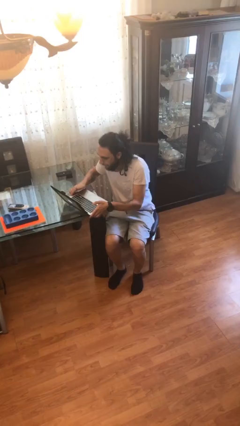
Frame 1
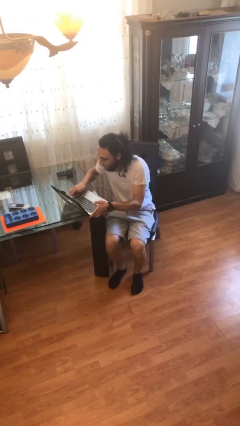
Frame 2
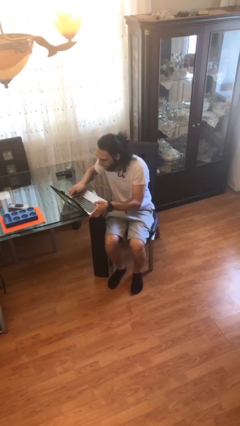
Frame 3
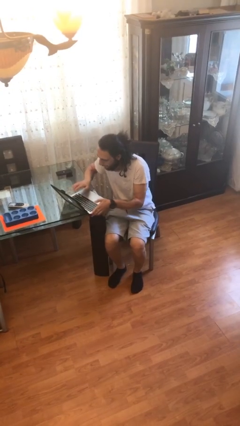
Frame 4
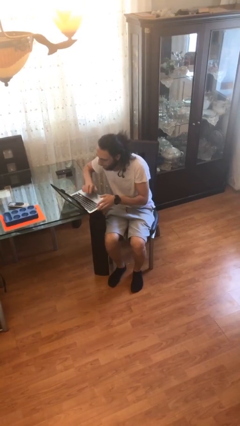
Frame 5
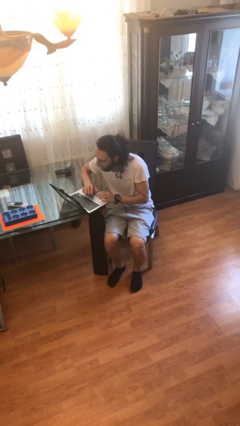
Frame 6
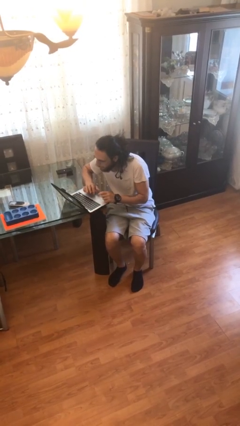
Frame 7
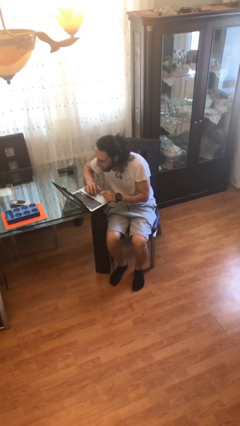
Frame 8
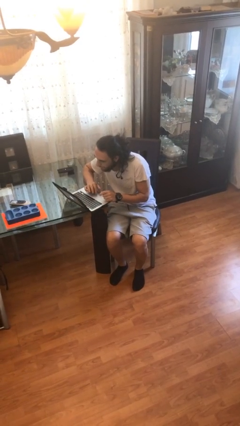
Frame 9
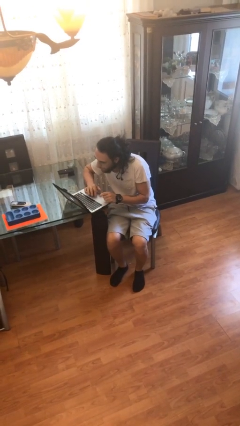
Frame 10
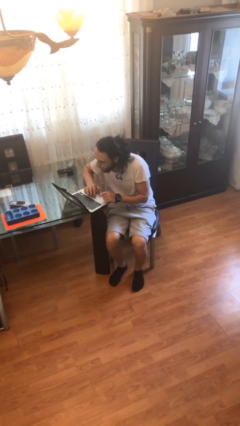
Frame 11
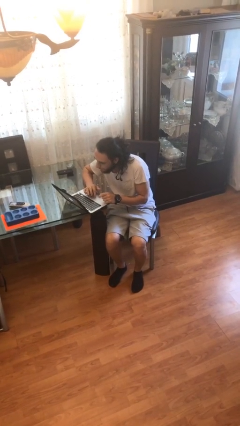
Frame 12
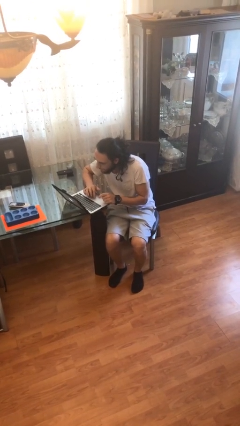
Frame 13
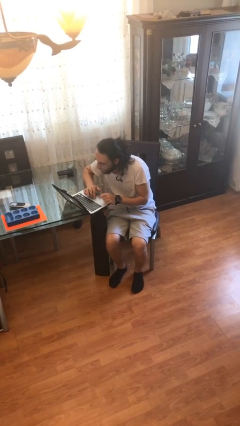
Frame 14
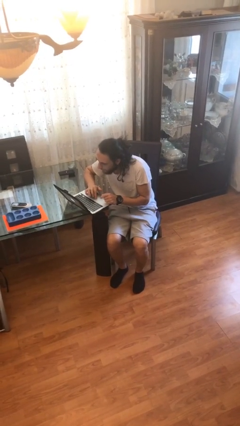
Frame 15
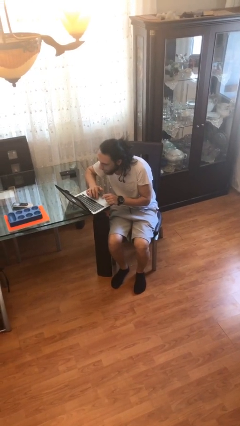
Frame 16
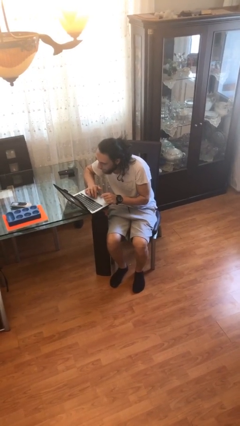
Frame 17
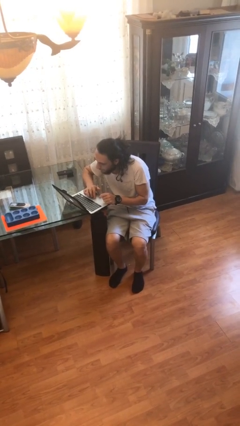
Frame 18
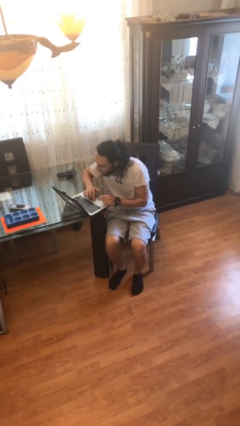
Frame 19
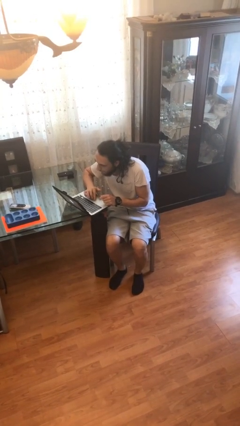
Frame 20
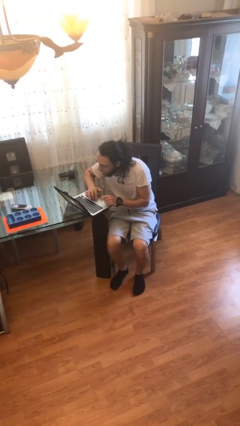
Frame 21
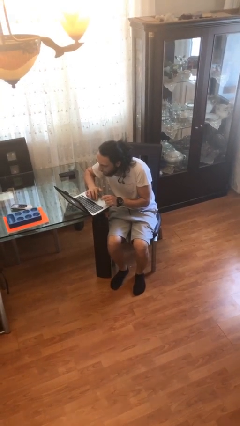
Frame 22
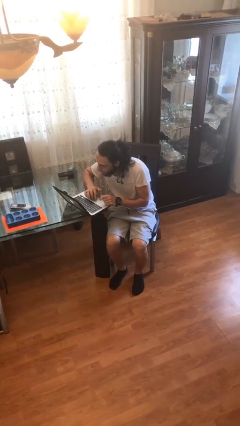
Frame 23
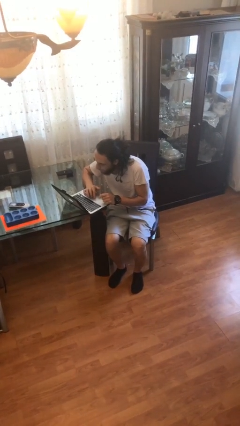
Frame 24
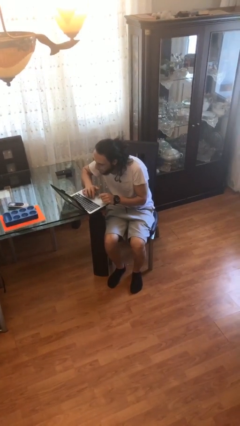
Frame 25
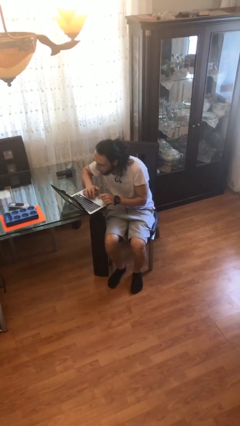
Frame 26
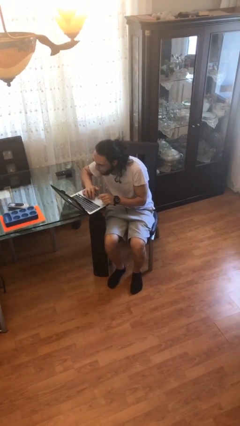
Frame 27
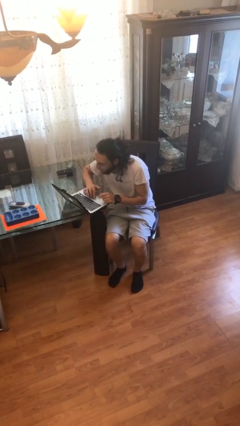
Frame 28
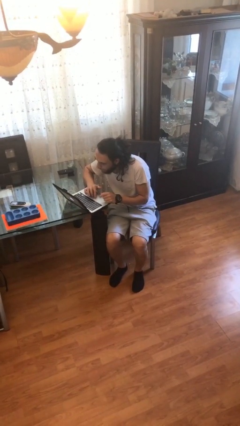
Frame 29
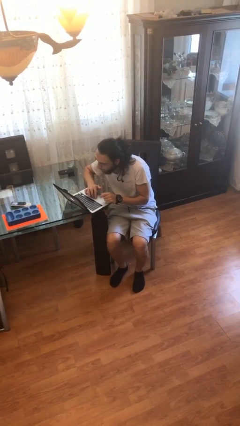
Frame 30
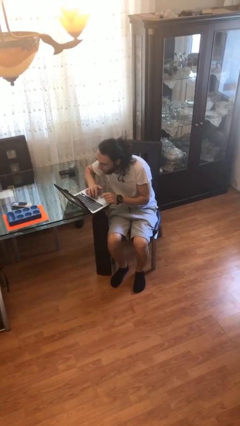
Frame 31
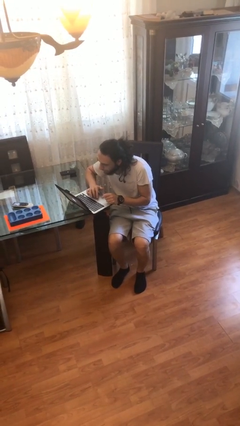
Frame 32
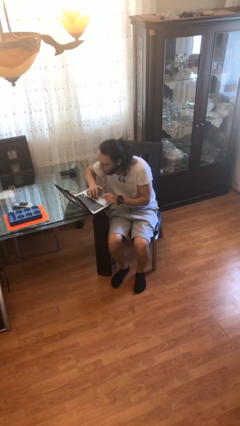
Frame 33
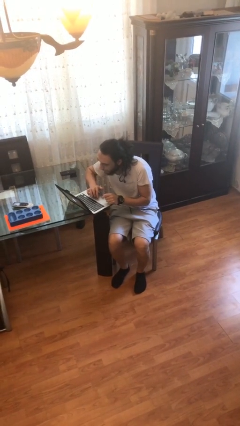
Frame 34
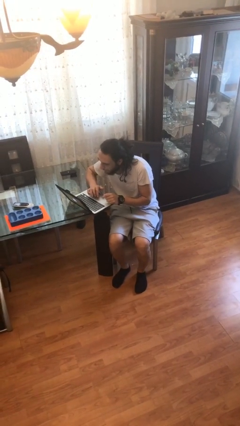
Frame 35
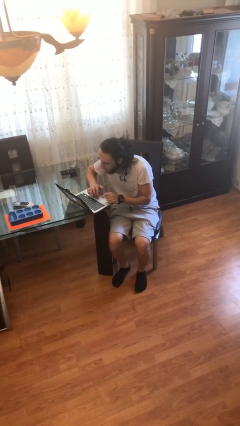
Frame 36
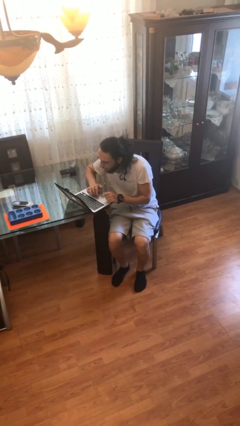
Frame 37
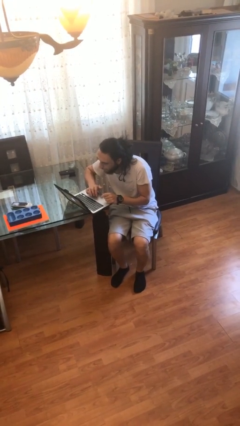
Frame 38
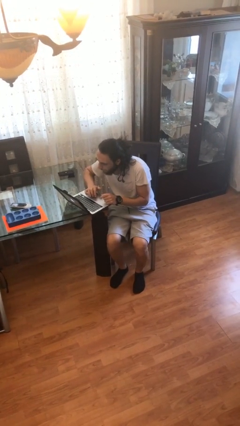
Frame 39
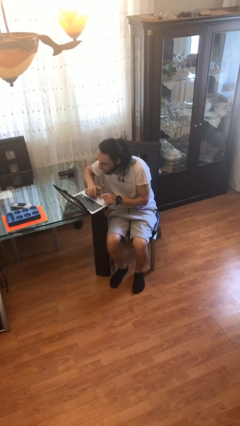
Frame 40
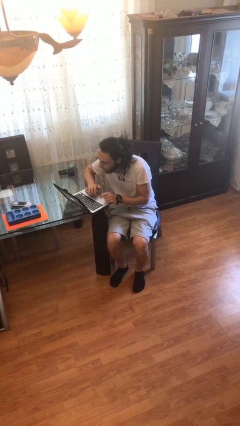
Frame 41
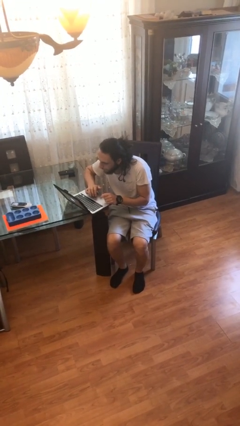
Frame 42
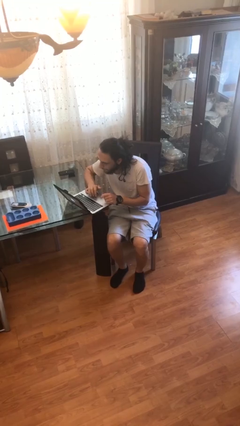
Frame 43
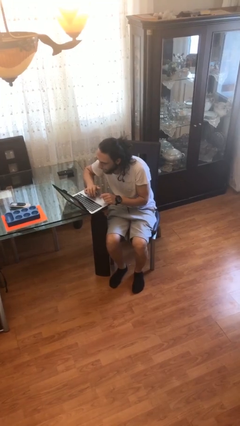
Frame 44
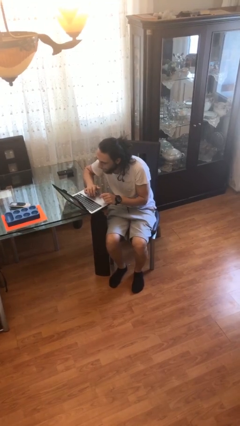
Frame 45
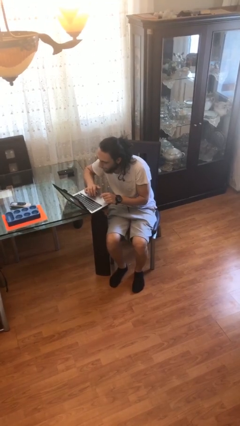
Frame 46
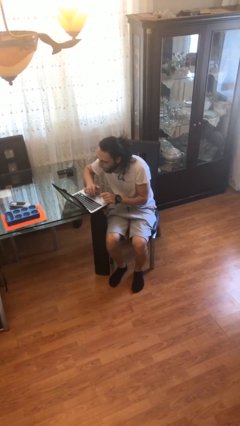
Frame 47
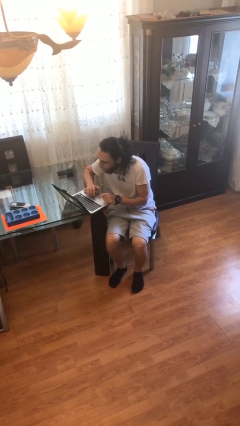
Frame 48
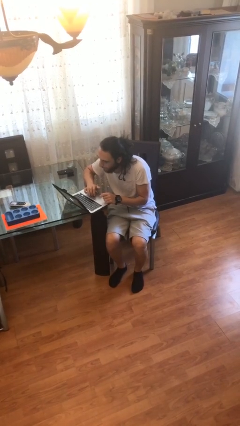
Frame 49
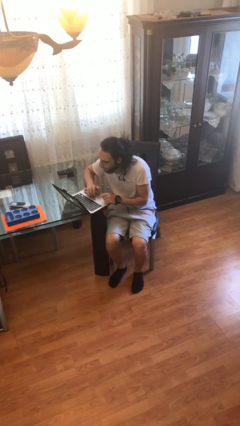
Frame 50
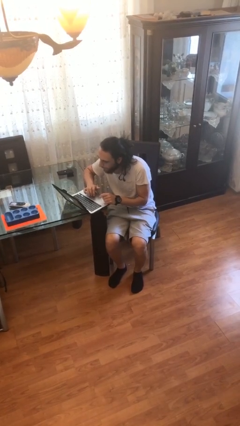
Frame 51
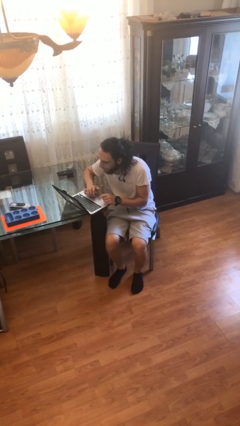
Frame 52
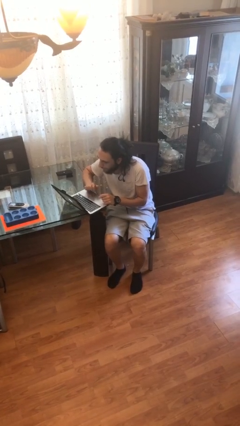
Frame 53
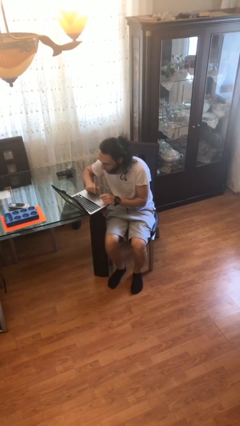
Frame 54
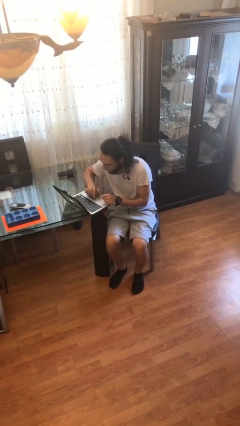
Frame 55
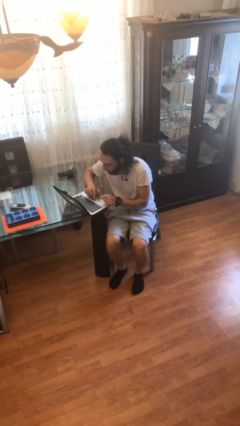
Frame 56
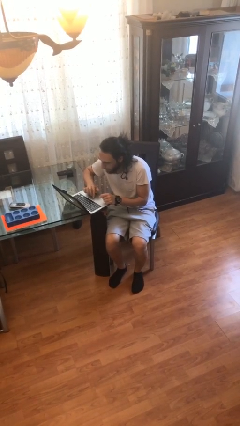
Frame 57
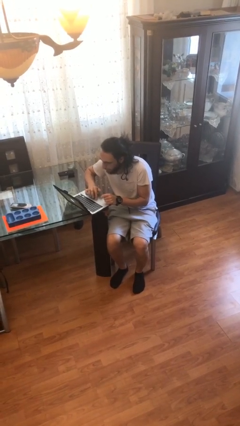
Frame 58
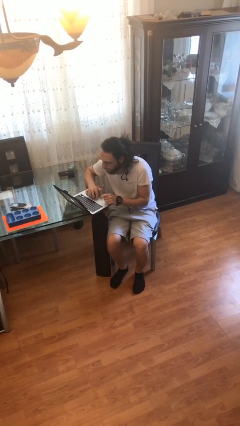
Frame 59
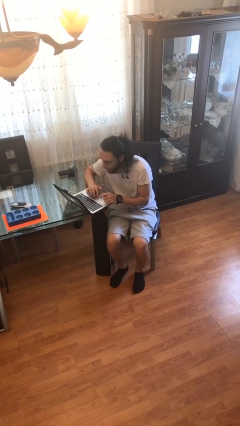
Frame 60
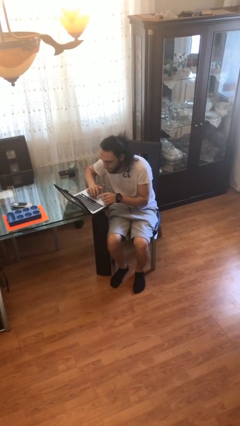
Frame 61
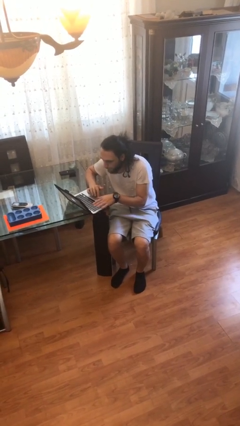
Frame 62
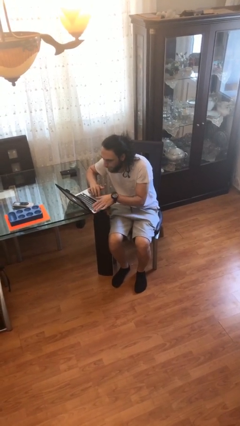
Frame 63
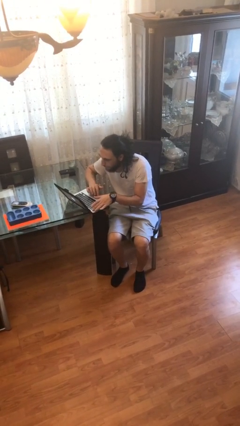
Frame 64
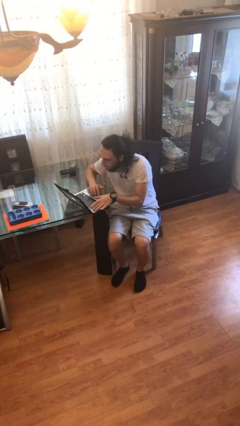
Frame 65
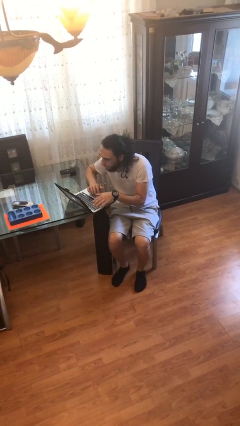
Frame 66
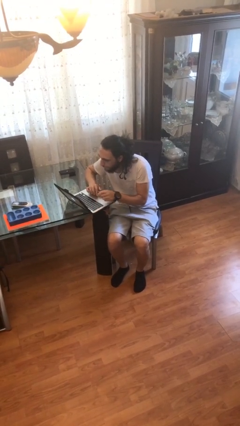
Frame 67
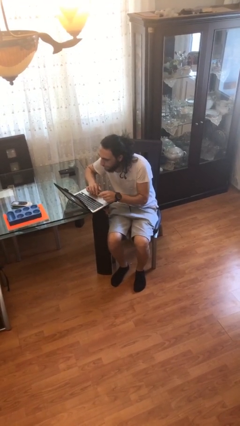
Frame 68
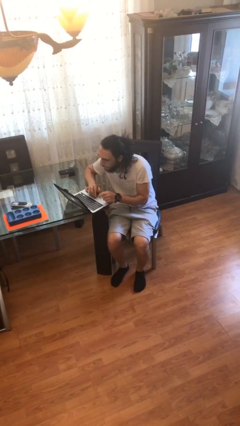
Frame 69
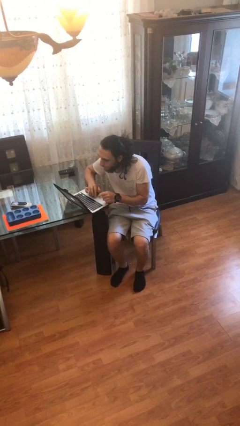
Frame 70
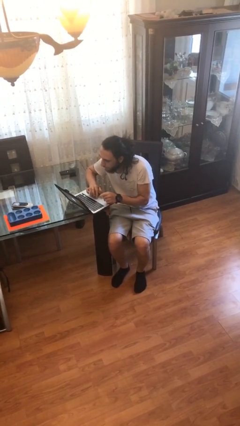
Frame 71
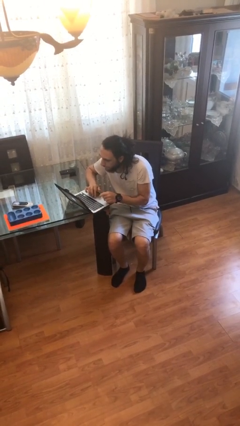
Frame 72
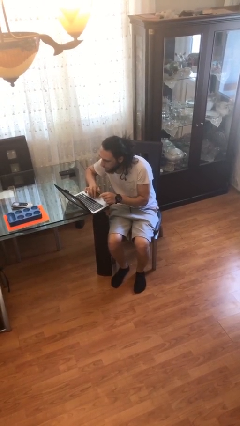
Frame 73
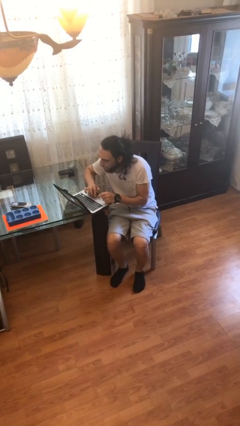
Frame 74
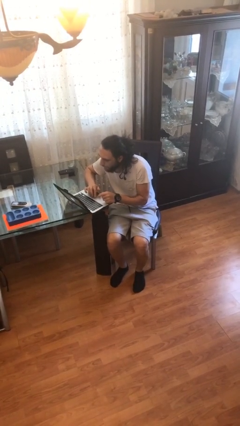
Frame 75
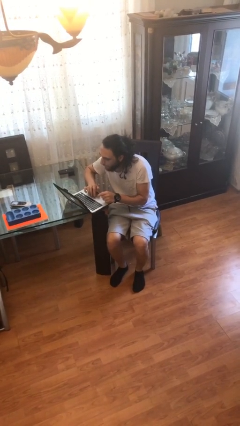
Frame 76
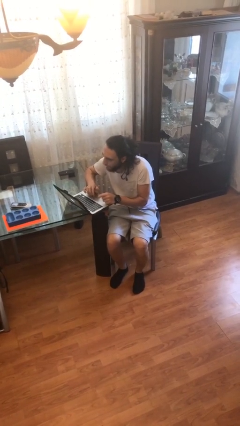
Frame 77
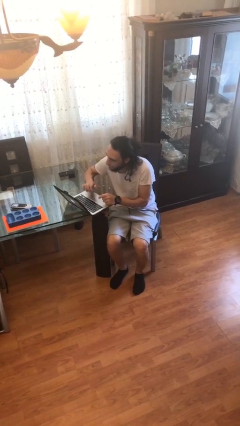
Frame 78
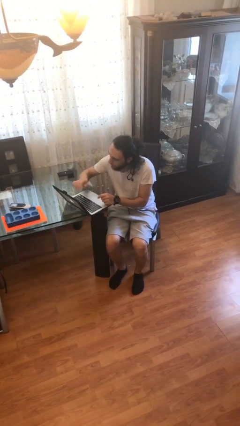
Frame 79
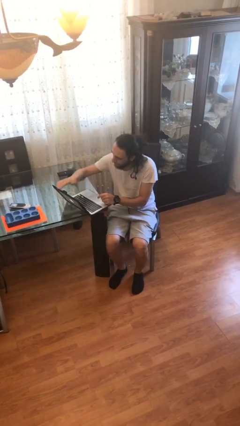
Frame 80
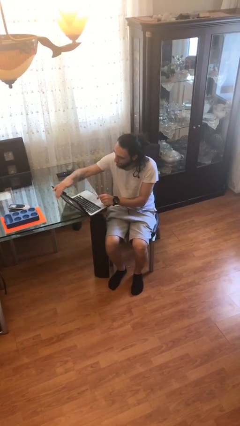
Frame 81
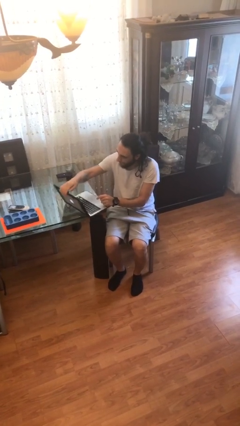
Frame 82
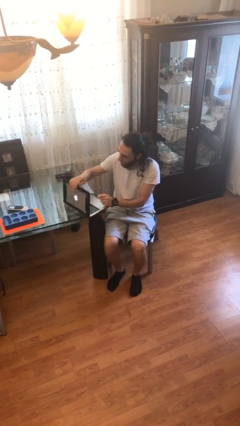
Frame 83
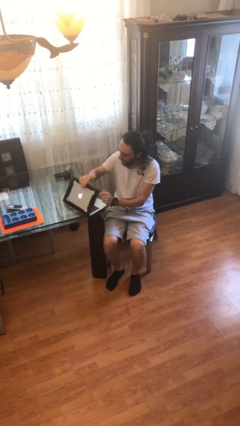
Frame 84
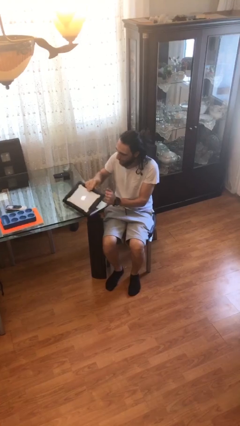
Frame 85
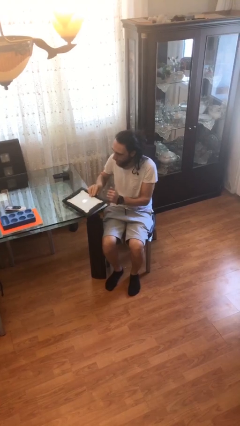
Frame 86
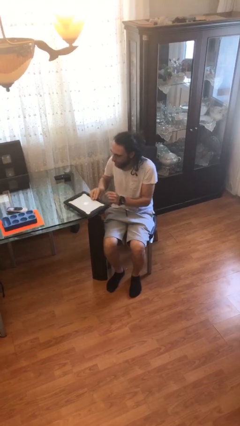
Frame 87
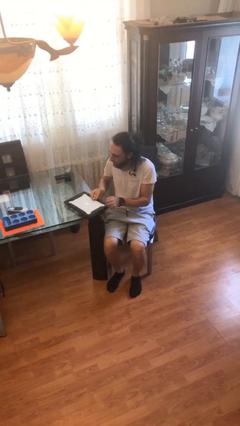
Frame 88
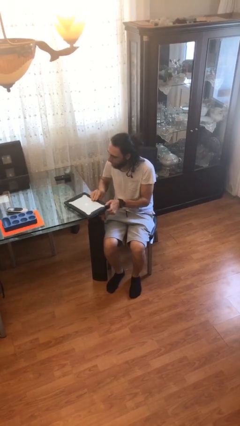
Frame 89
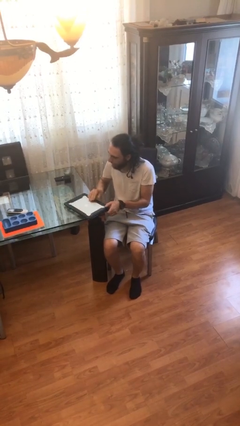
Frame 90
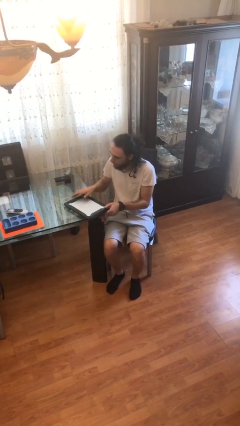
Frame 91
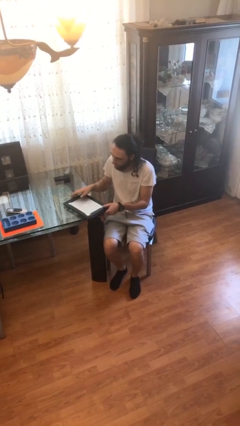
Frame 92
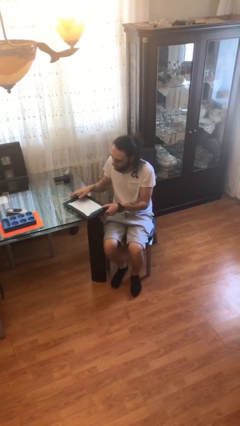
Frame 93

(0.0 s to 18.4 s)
person interacts with laptop

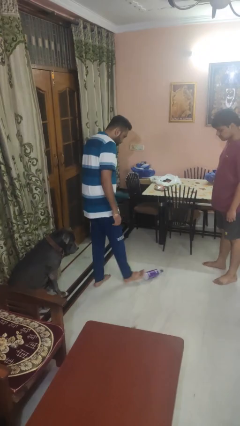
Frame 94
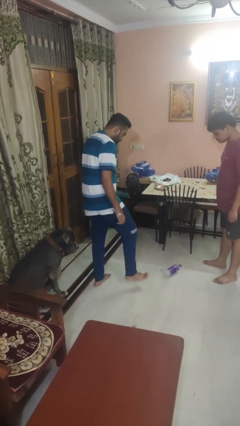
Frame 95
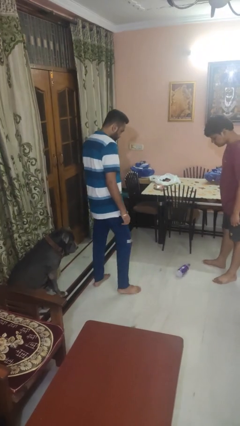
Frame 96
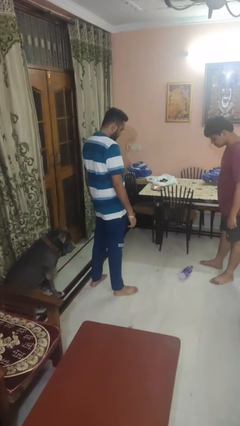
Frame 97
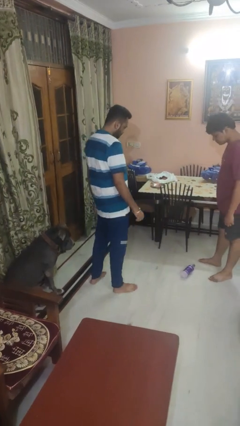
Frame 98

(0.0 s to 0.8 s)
person kicks object to person
